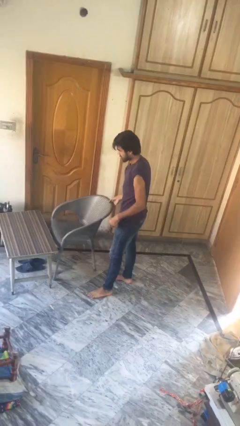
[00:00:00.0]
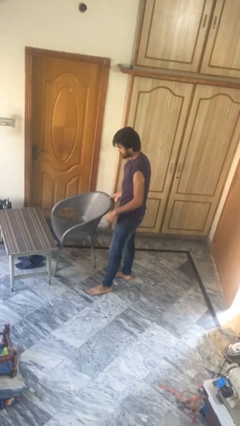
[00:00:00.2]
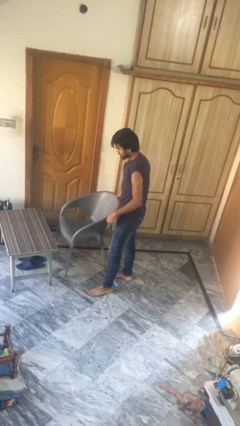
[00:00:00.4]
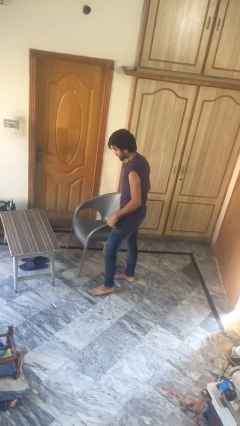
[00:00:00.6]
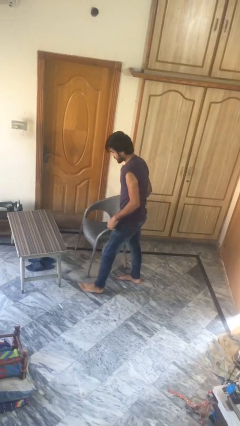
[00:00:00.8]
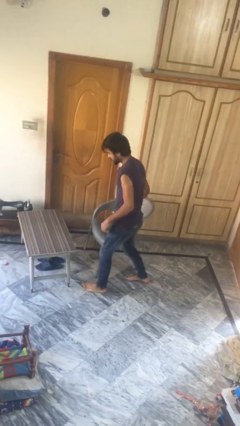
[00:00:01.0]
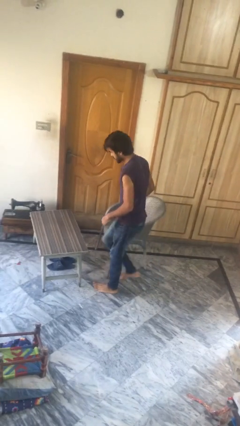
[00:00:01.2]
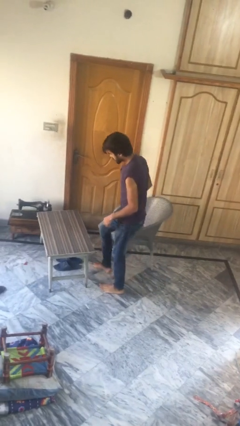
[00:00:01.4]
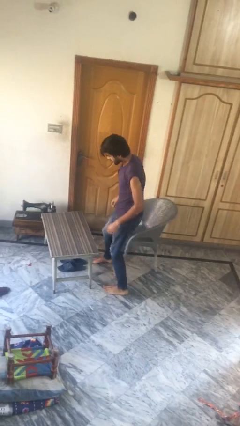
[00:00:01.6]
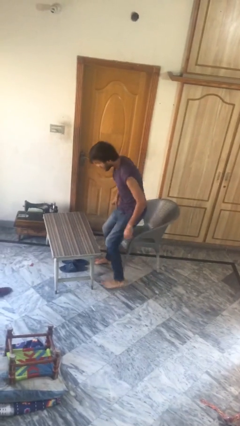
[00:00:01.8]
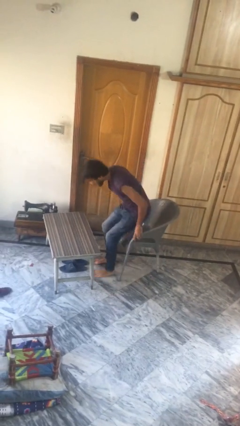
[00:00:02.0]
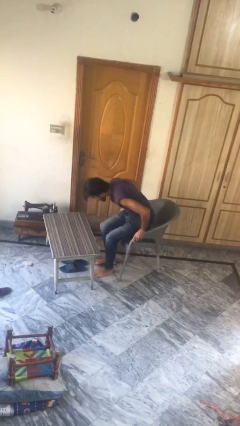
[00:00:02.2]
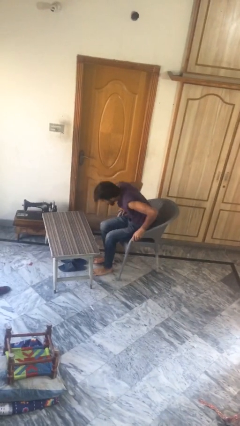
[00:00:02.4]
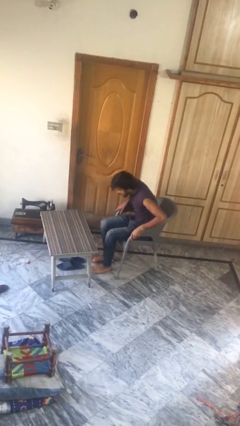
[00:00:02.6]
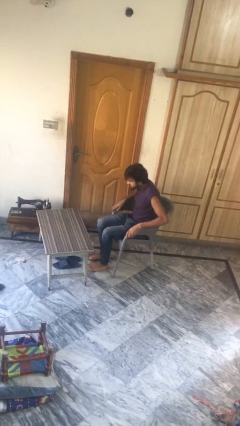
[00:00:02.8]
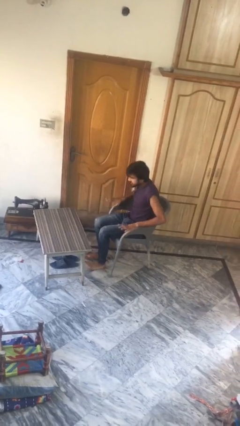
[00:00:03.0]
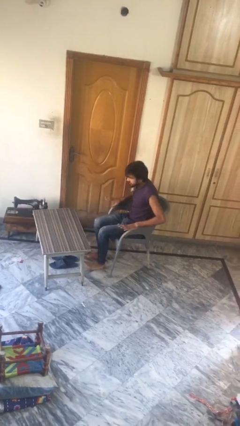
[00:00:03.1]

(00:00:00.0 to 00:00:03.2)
person sits down

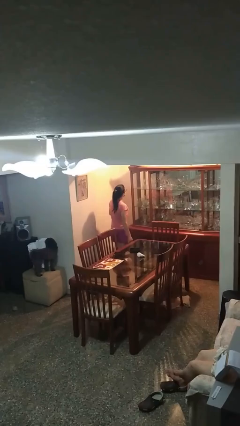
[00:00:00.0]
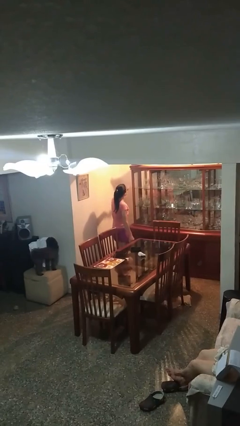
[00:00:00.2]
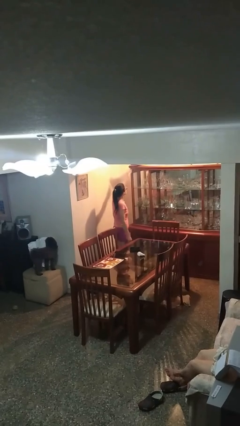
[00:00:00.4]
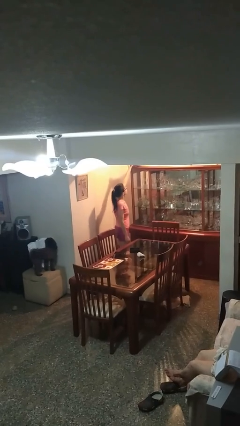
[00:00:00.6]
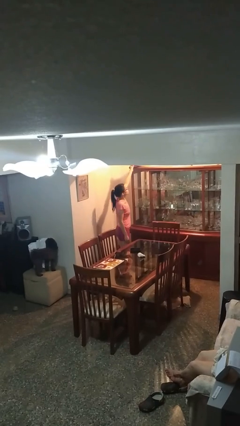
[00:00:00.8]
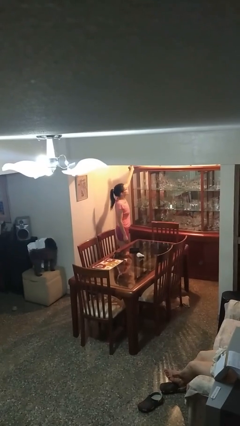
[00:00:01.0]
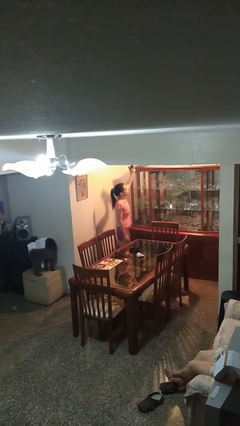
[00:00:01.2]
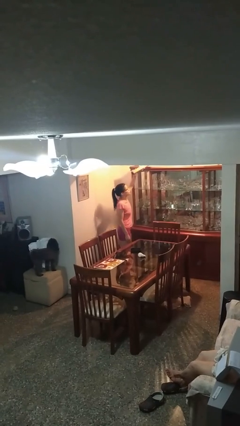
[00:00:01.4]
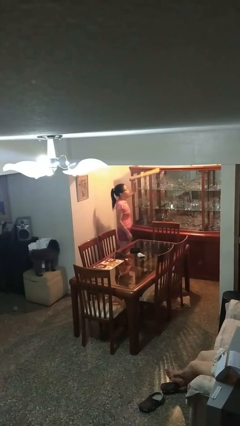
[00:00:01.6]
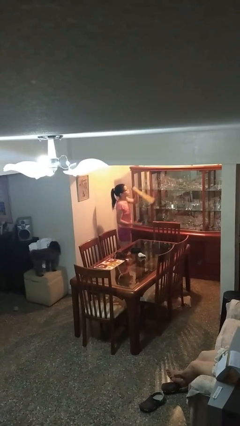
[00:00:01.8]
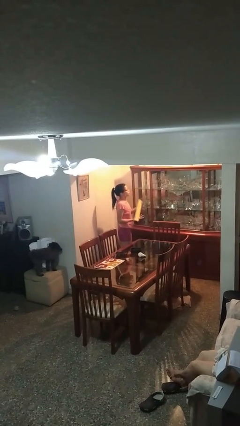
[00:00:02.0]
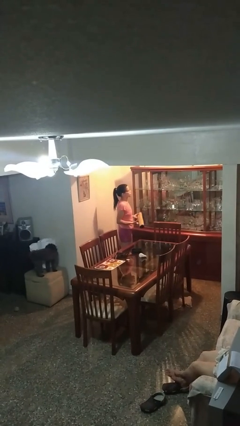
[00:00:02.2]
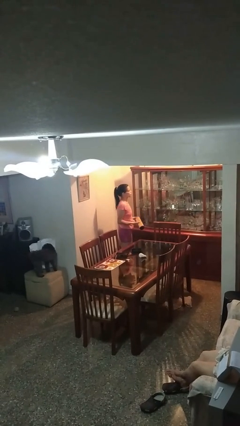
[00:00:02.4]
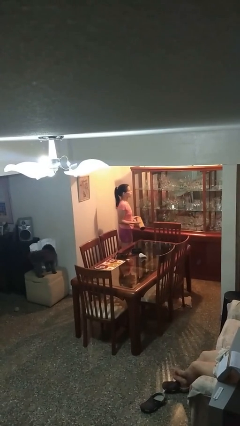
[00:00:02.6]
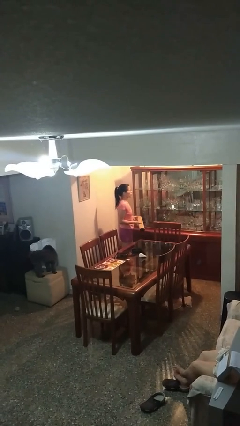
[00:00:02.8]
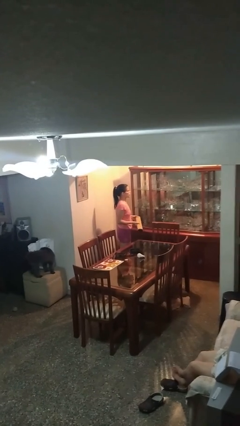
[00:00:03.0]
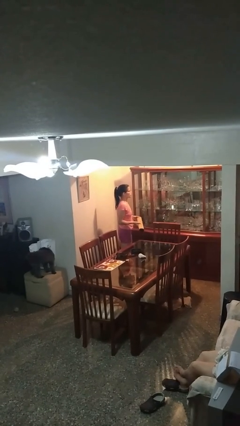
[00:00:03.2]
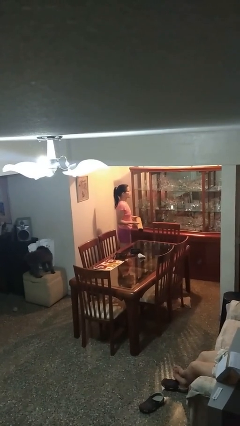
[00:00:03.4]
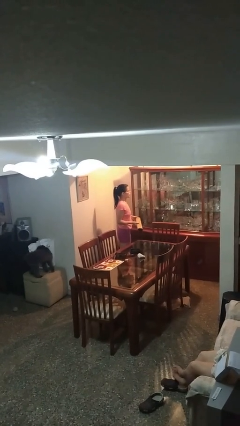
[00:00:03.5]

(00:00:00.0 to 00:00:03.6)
person picks up object from shelf

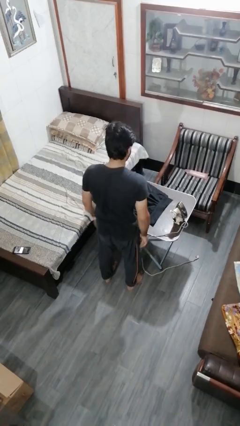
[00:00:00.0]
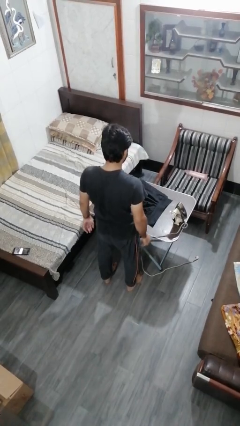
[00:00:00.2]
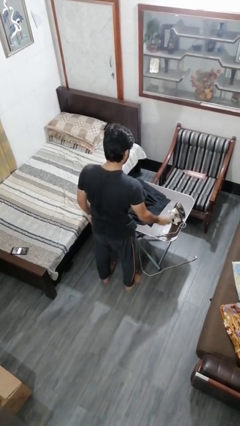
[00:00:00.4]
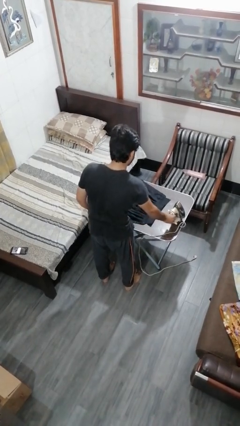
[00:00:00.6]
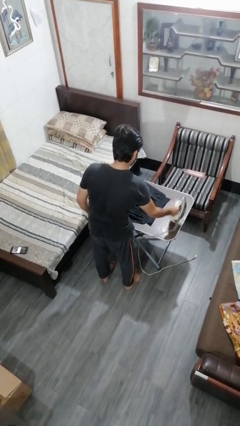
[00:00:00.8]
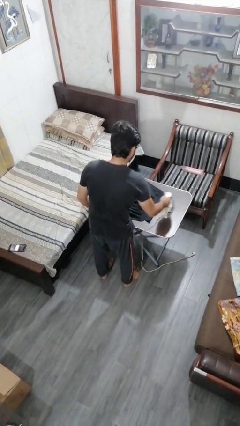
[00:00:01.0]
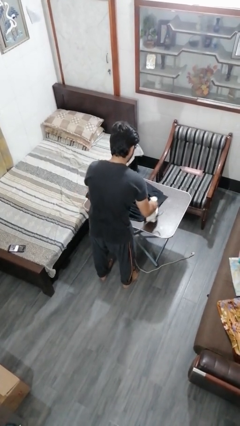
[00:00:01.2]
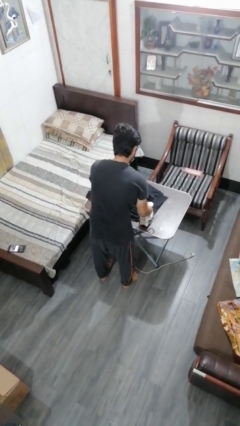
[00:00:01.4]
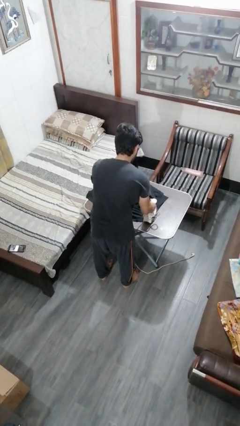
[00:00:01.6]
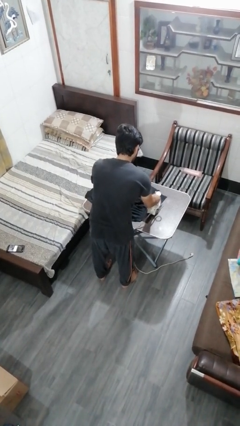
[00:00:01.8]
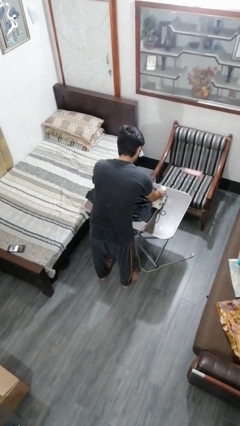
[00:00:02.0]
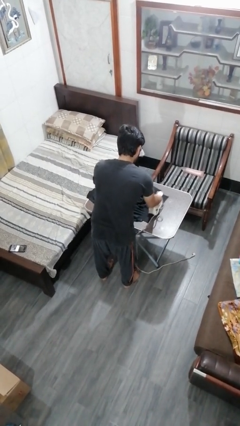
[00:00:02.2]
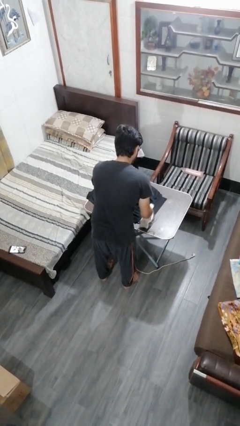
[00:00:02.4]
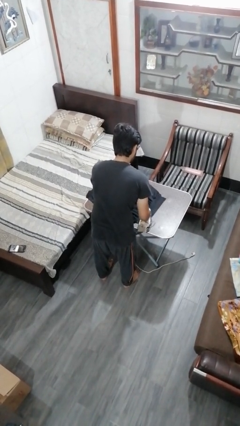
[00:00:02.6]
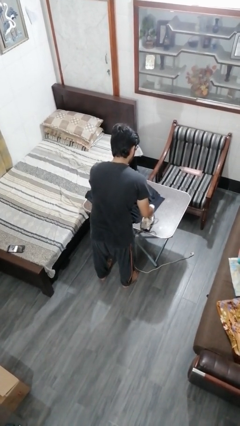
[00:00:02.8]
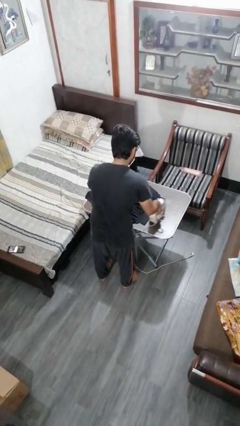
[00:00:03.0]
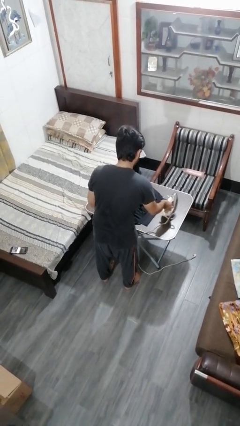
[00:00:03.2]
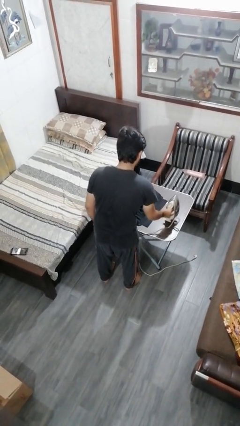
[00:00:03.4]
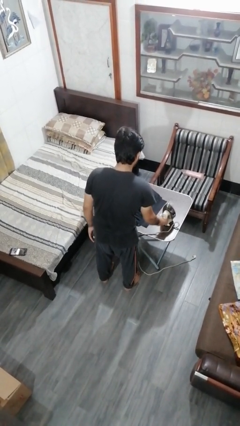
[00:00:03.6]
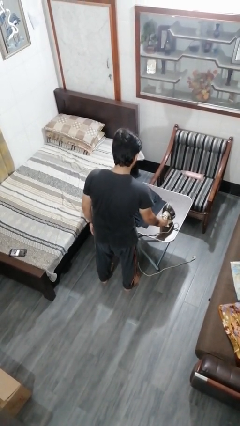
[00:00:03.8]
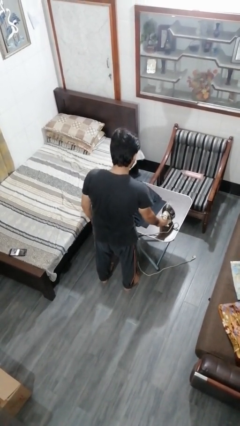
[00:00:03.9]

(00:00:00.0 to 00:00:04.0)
person irons clothes

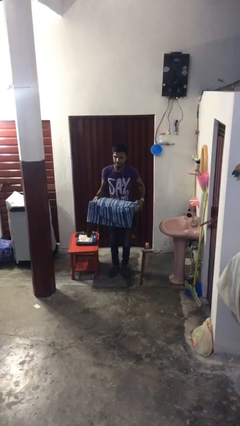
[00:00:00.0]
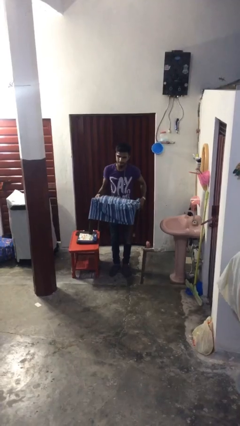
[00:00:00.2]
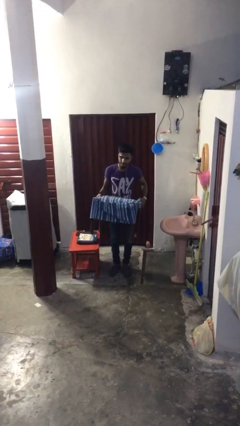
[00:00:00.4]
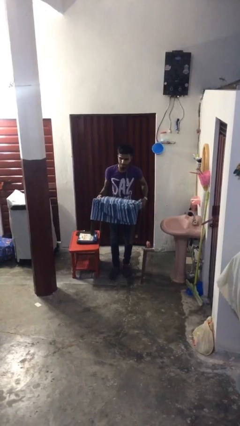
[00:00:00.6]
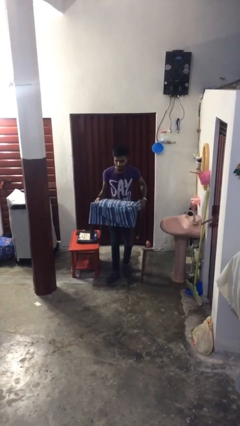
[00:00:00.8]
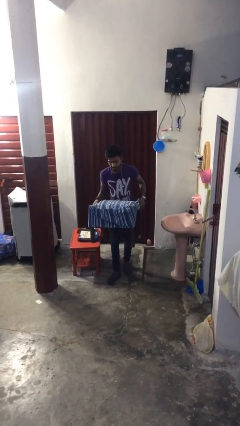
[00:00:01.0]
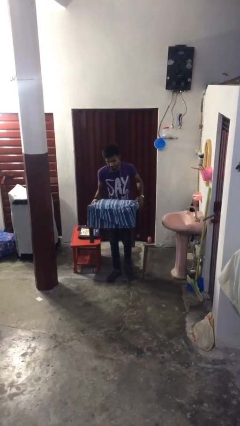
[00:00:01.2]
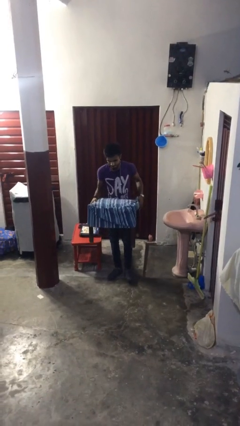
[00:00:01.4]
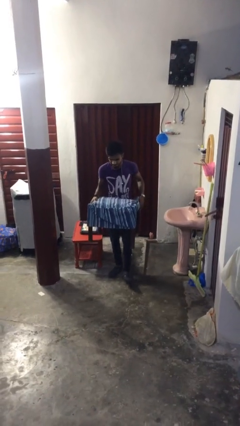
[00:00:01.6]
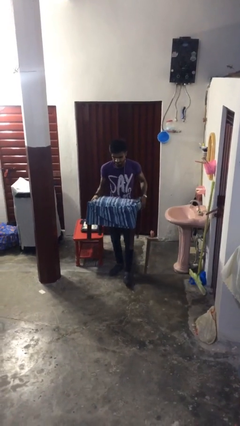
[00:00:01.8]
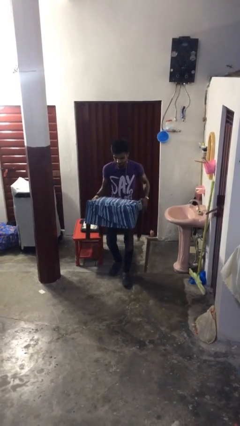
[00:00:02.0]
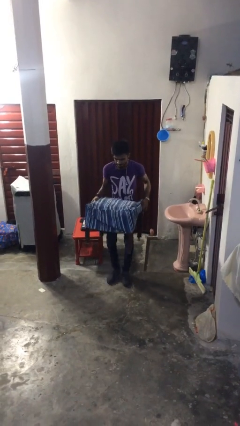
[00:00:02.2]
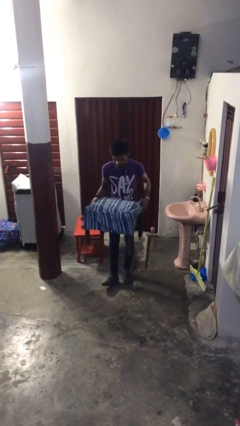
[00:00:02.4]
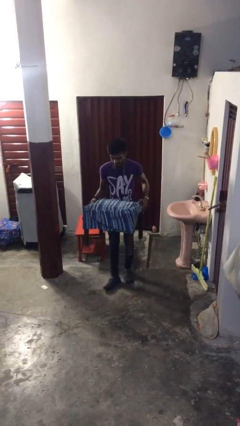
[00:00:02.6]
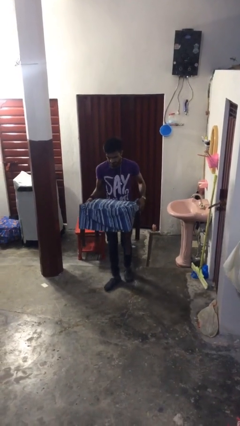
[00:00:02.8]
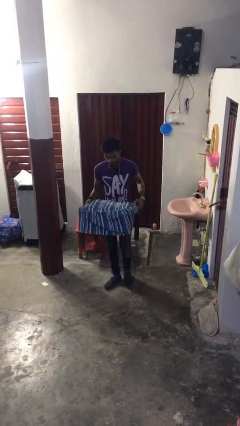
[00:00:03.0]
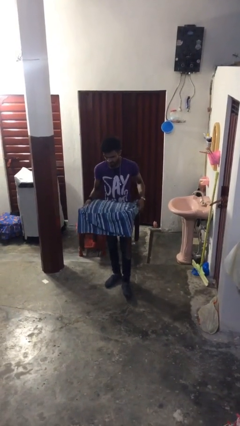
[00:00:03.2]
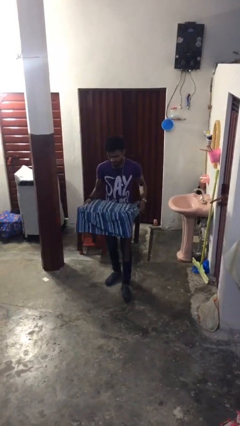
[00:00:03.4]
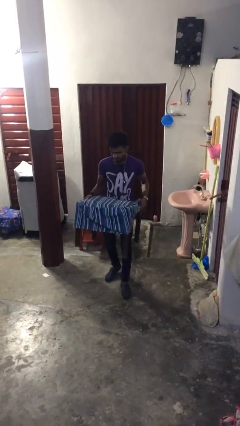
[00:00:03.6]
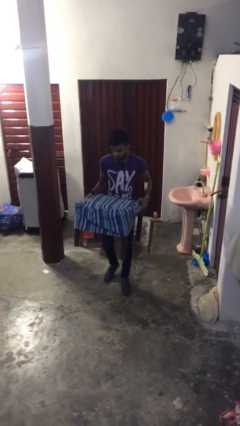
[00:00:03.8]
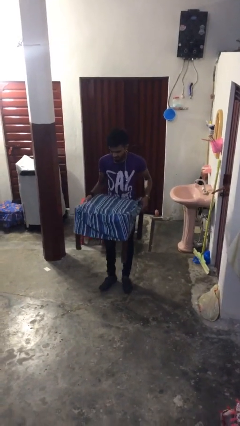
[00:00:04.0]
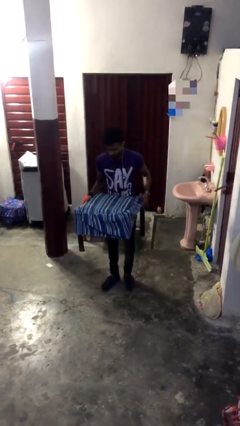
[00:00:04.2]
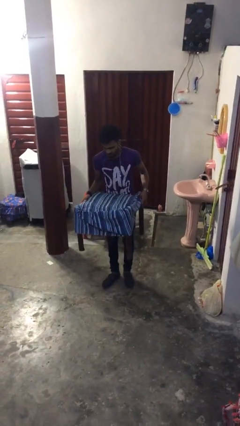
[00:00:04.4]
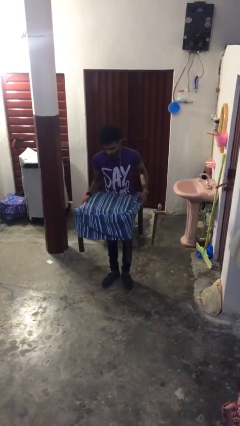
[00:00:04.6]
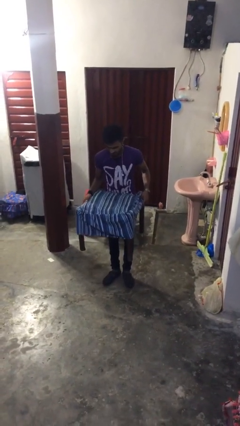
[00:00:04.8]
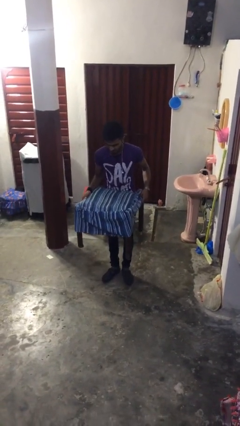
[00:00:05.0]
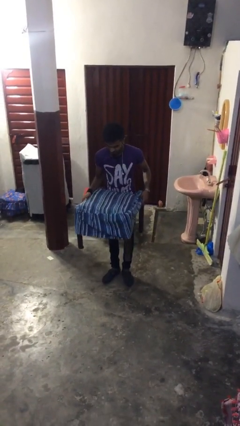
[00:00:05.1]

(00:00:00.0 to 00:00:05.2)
person carries heavy object

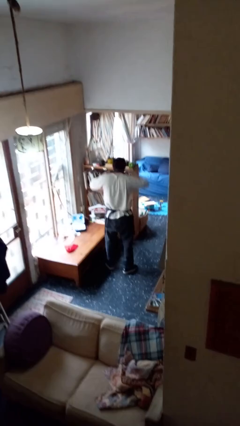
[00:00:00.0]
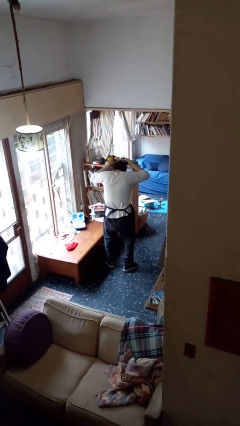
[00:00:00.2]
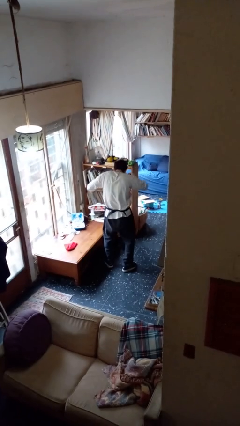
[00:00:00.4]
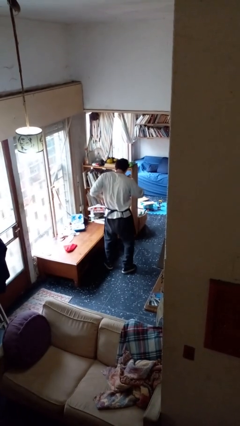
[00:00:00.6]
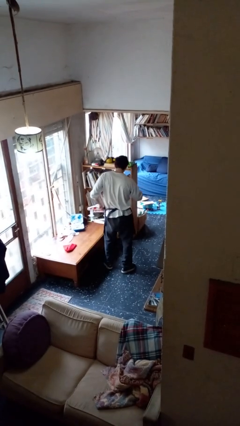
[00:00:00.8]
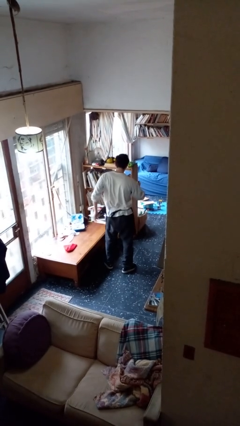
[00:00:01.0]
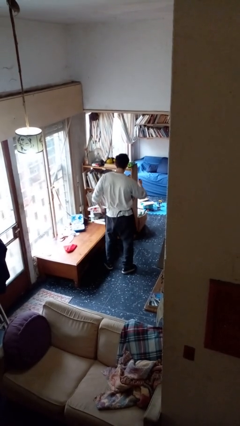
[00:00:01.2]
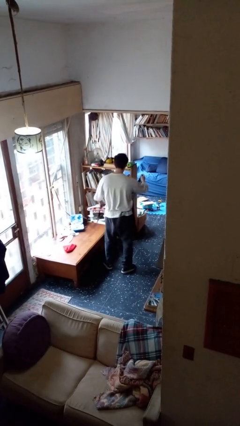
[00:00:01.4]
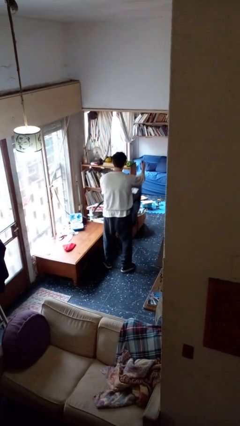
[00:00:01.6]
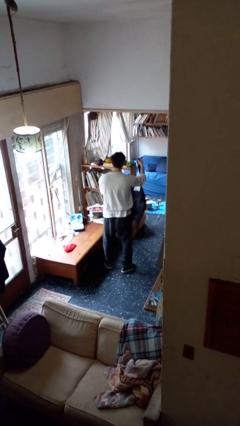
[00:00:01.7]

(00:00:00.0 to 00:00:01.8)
person takes off apron
